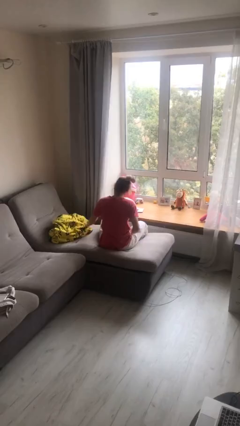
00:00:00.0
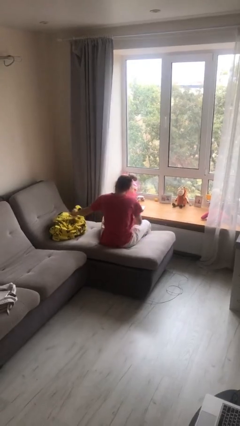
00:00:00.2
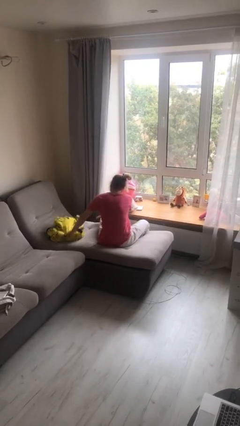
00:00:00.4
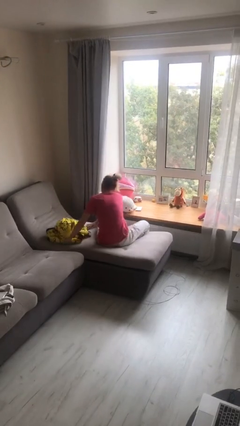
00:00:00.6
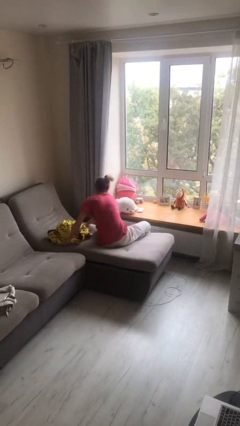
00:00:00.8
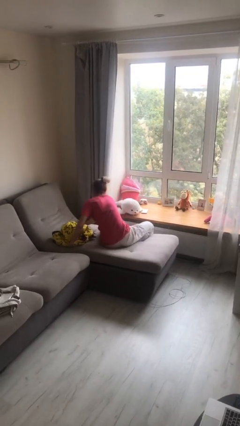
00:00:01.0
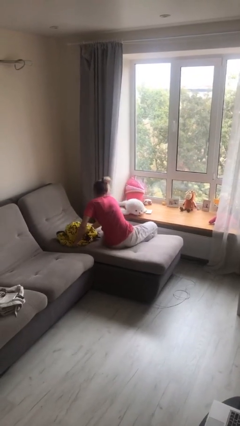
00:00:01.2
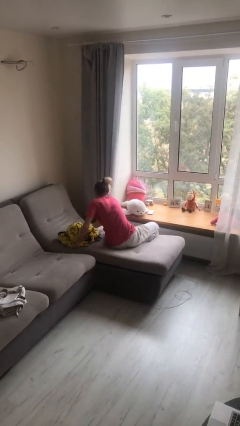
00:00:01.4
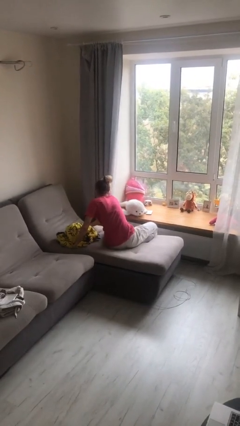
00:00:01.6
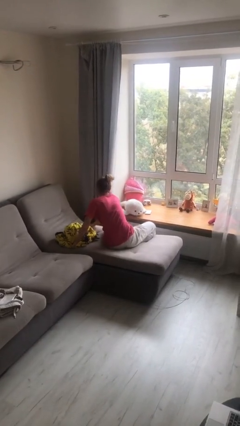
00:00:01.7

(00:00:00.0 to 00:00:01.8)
person searches in couch

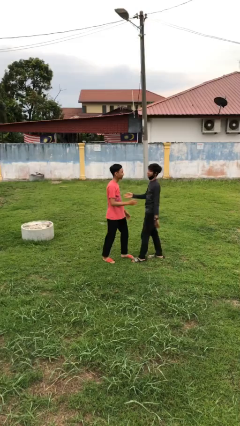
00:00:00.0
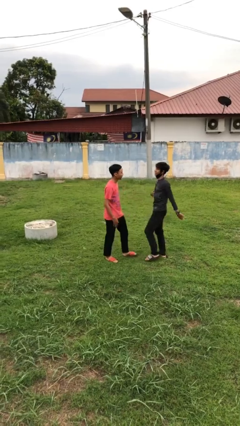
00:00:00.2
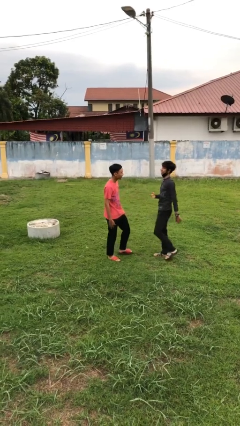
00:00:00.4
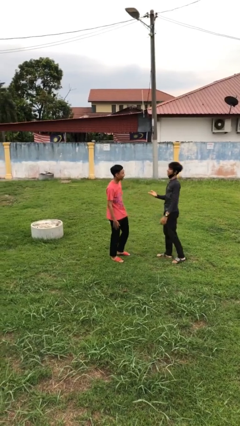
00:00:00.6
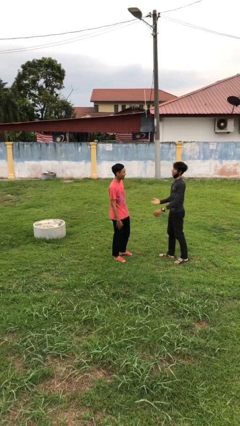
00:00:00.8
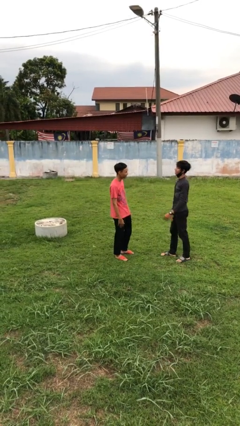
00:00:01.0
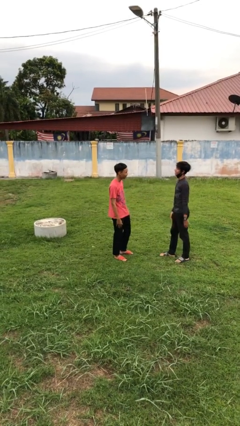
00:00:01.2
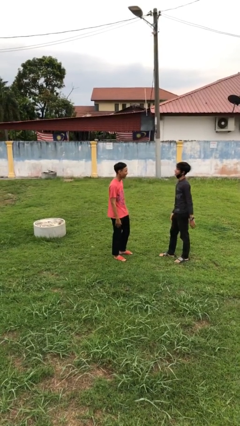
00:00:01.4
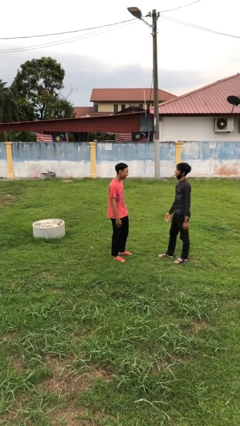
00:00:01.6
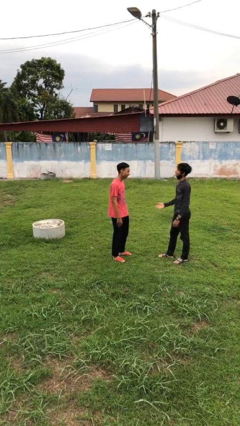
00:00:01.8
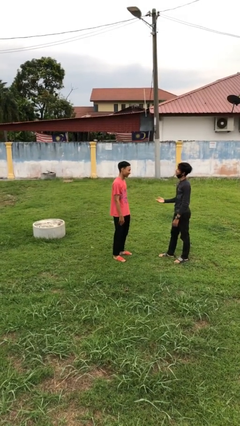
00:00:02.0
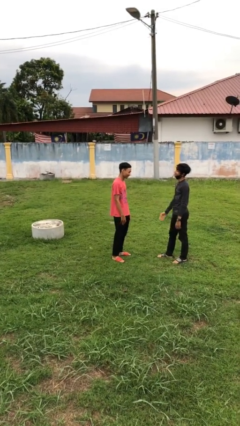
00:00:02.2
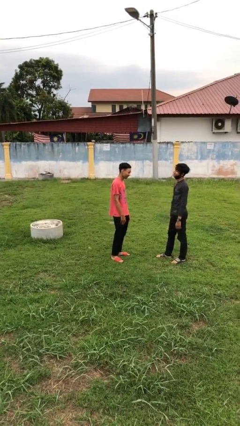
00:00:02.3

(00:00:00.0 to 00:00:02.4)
person talks to person

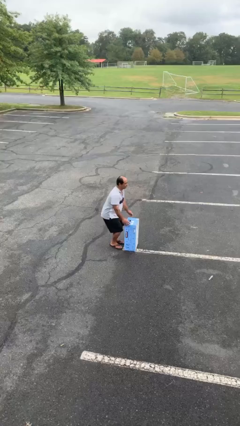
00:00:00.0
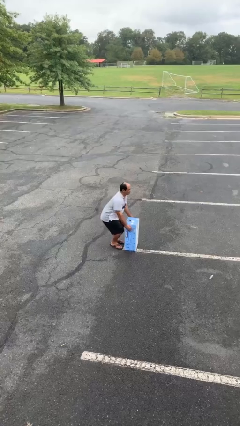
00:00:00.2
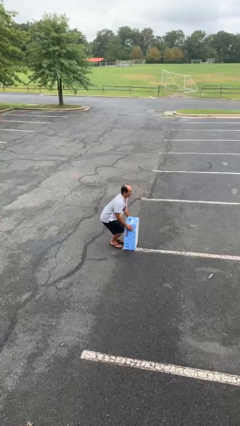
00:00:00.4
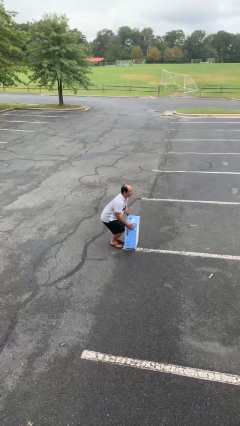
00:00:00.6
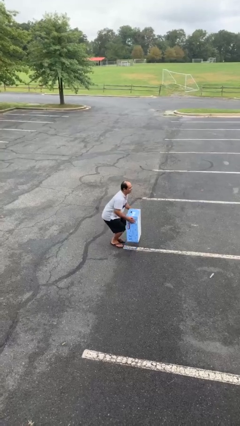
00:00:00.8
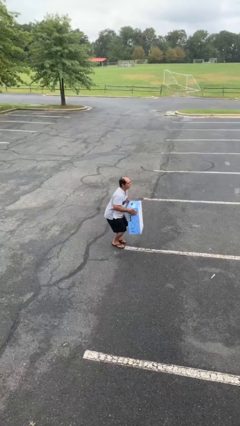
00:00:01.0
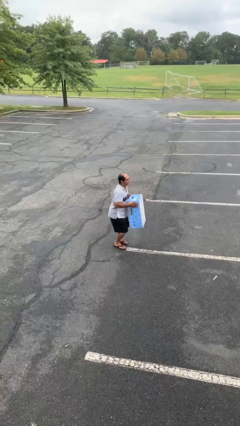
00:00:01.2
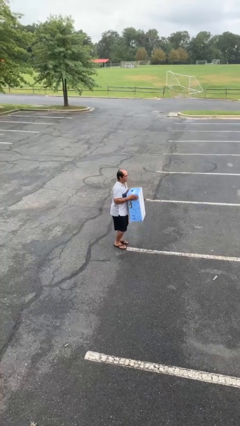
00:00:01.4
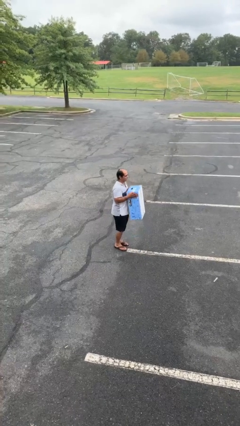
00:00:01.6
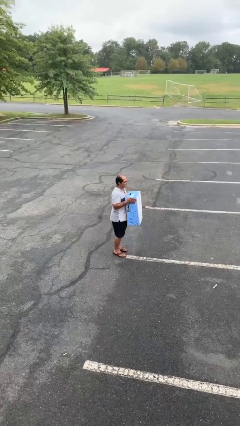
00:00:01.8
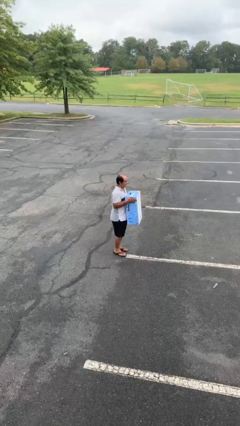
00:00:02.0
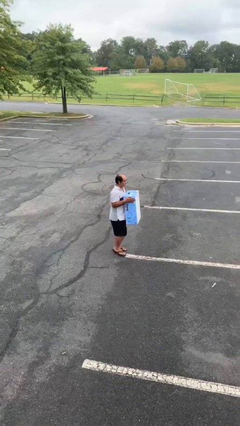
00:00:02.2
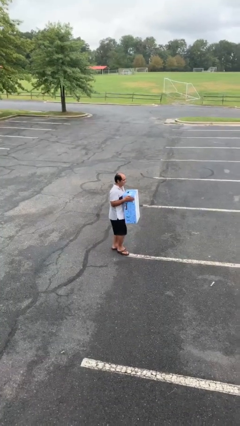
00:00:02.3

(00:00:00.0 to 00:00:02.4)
person picks up object from floor

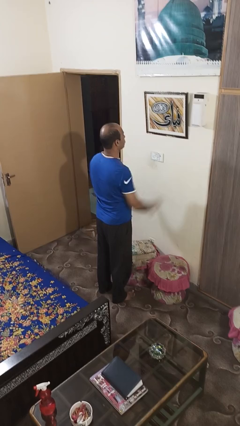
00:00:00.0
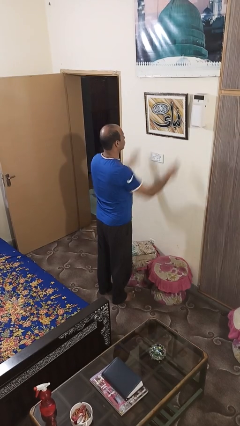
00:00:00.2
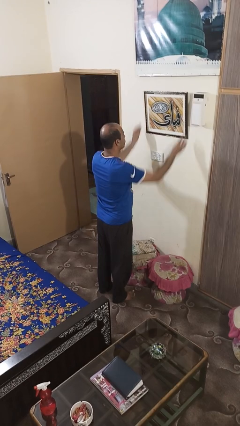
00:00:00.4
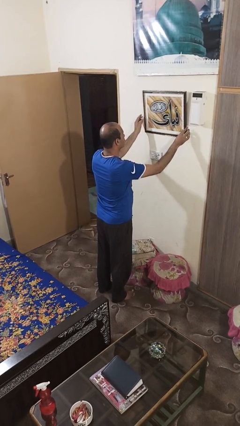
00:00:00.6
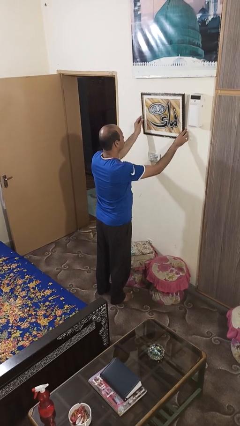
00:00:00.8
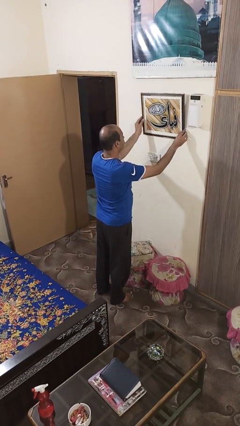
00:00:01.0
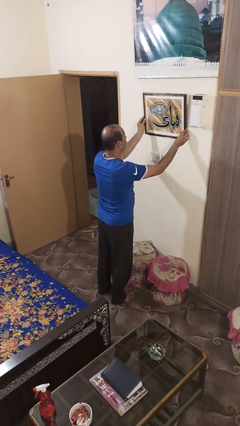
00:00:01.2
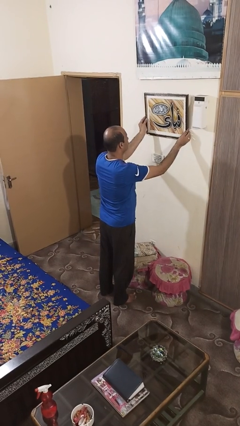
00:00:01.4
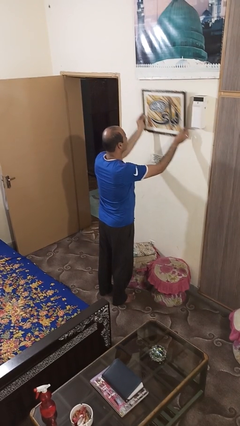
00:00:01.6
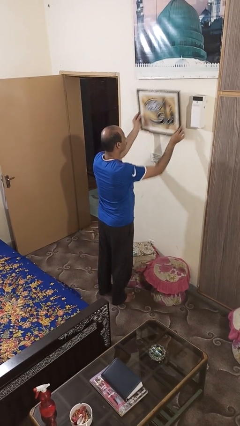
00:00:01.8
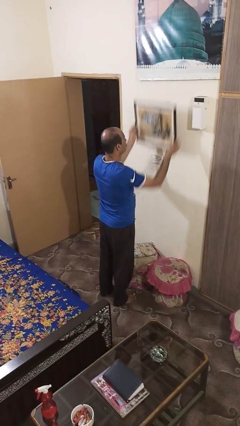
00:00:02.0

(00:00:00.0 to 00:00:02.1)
person takes down picture frame

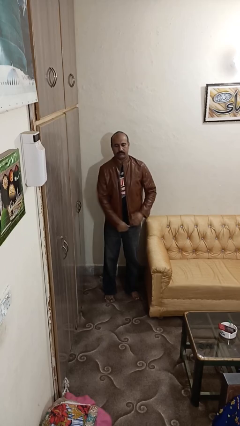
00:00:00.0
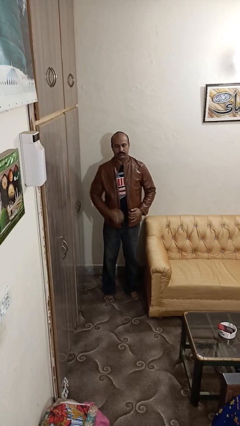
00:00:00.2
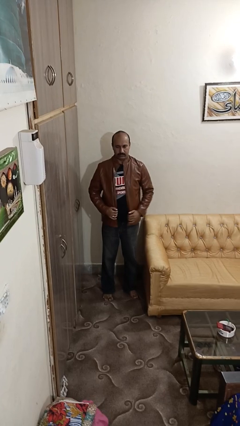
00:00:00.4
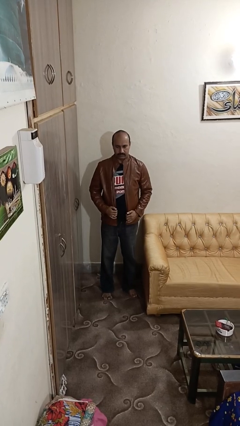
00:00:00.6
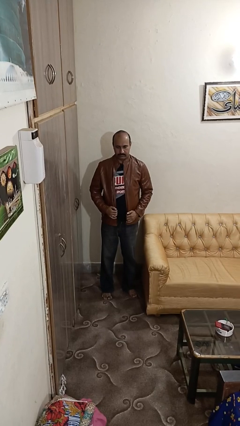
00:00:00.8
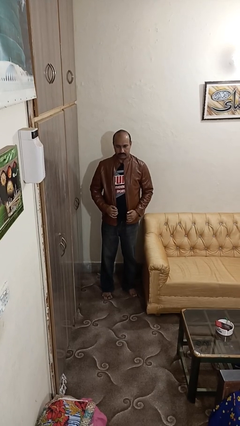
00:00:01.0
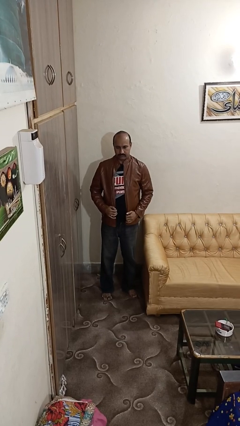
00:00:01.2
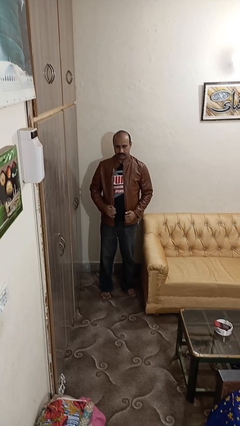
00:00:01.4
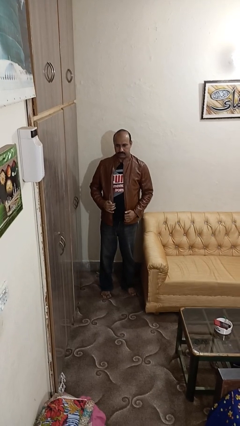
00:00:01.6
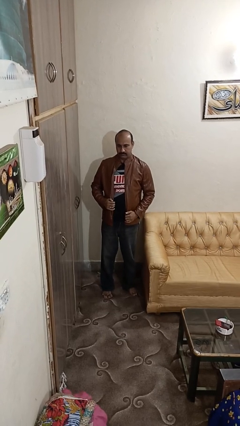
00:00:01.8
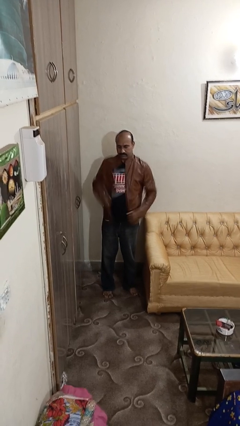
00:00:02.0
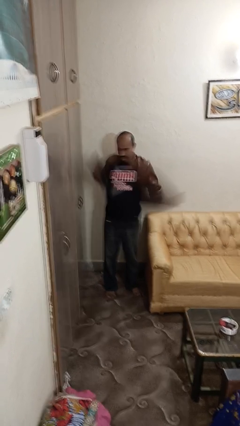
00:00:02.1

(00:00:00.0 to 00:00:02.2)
person unzips jacket

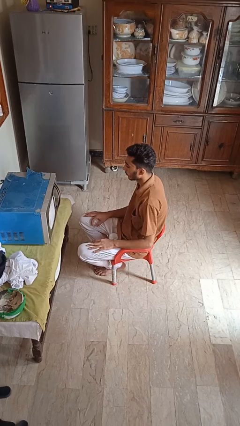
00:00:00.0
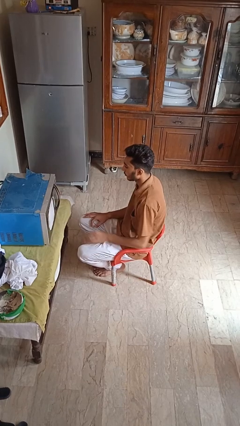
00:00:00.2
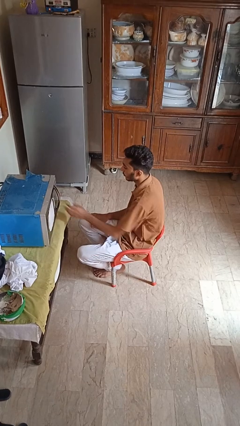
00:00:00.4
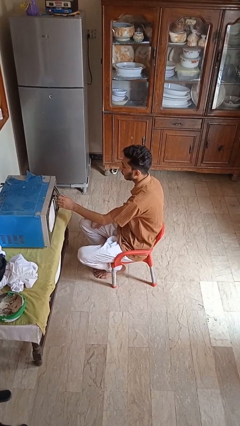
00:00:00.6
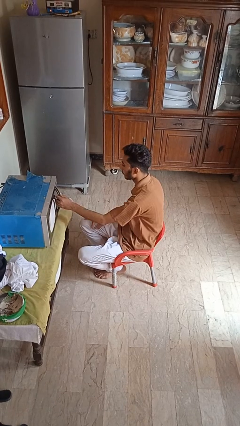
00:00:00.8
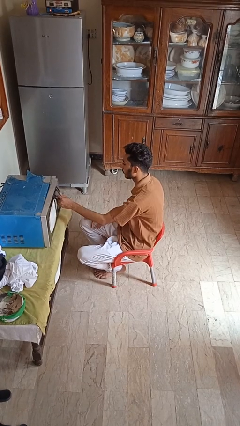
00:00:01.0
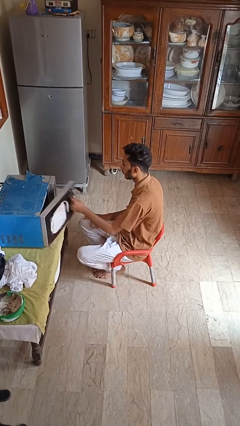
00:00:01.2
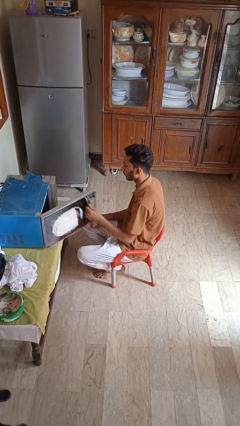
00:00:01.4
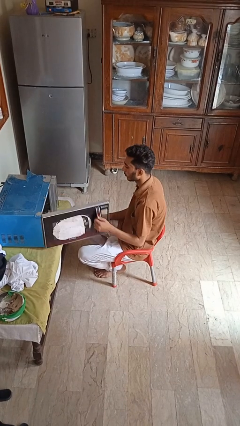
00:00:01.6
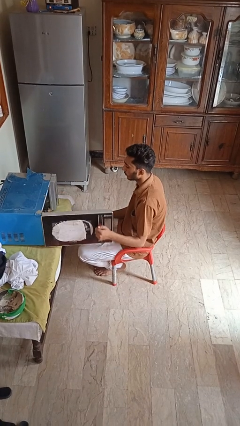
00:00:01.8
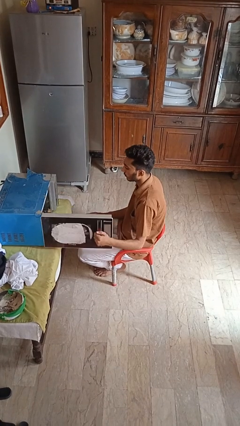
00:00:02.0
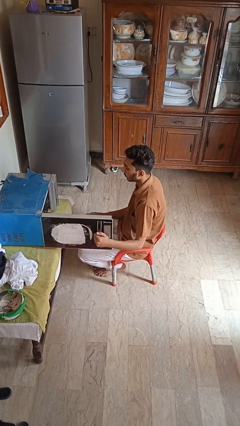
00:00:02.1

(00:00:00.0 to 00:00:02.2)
person opens microwave

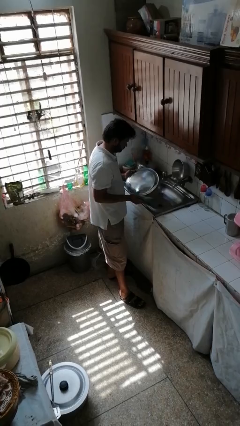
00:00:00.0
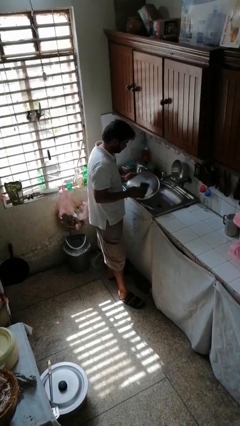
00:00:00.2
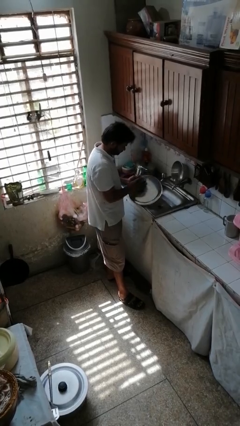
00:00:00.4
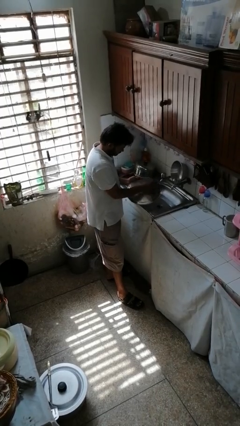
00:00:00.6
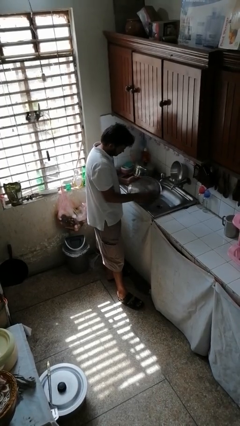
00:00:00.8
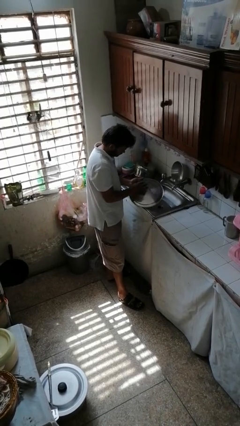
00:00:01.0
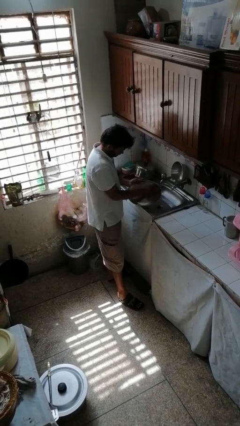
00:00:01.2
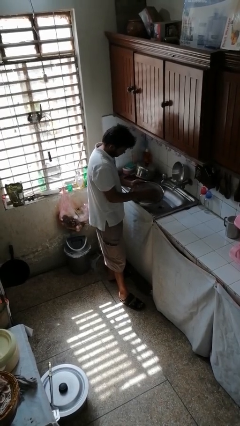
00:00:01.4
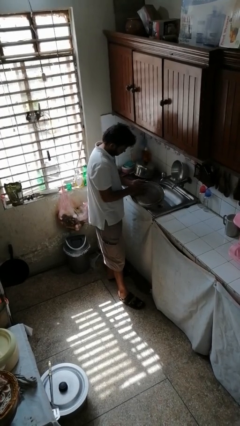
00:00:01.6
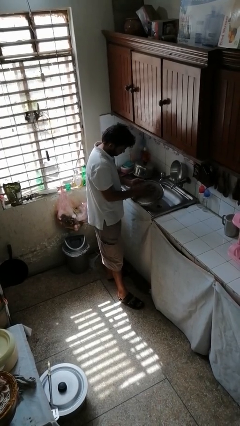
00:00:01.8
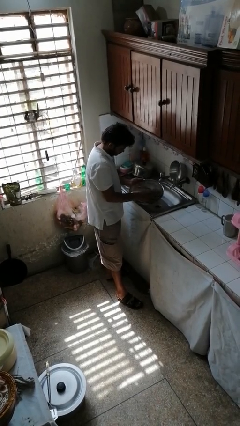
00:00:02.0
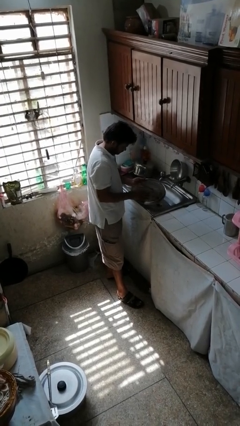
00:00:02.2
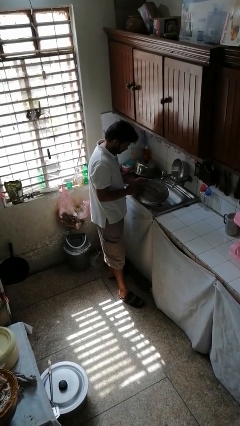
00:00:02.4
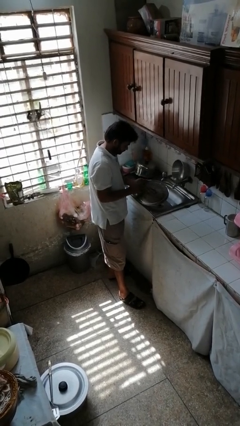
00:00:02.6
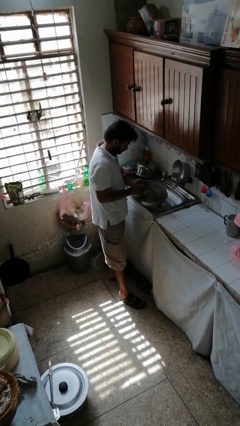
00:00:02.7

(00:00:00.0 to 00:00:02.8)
person washes dish

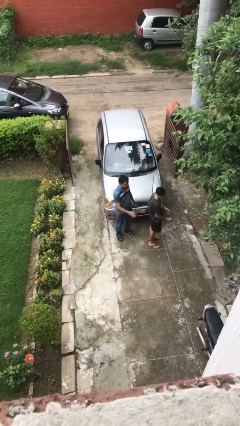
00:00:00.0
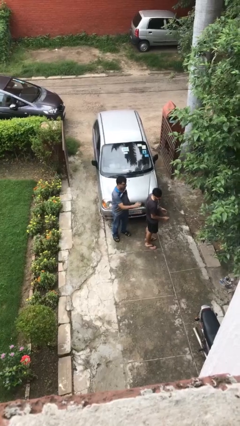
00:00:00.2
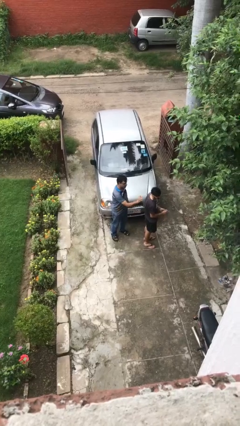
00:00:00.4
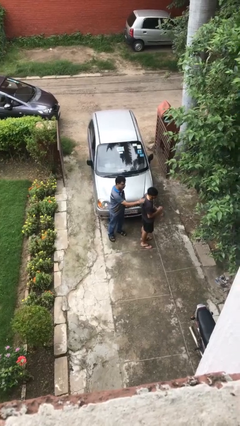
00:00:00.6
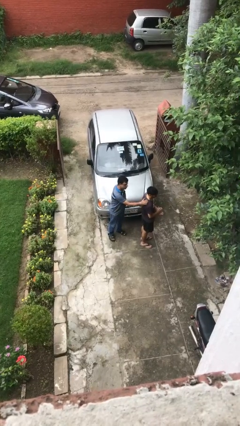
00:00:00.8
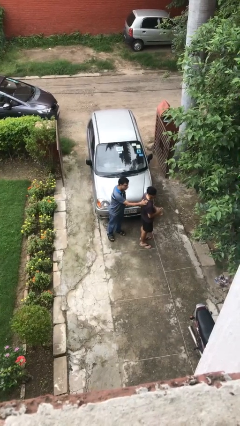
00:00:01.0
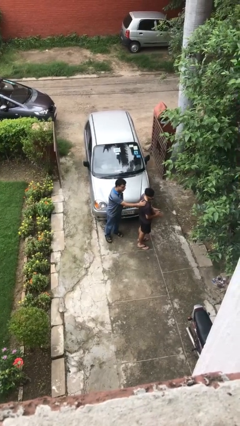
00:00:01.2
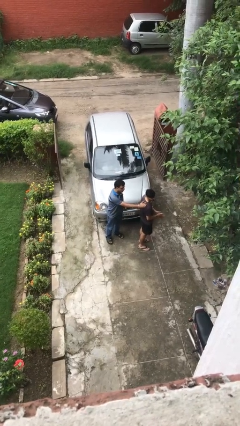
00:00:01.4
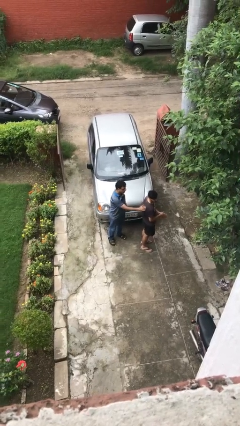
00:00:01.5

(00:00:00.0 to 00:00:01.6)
person touches back of person
